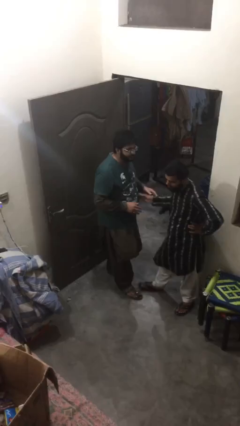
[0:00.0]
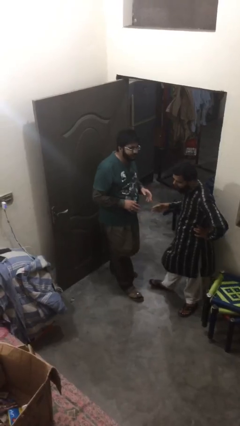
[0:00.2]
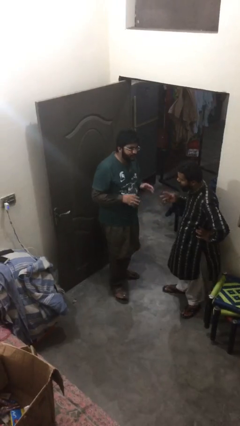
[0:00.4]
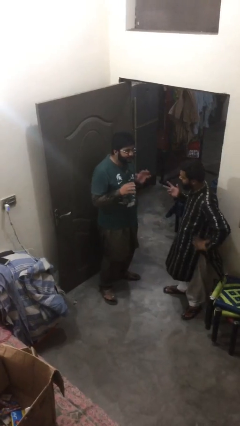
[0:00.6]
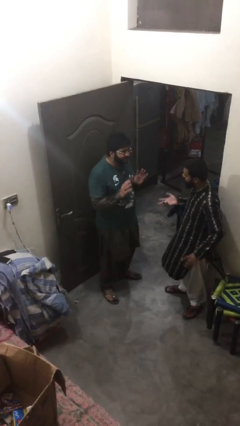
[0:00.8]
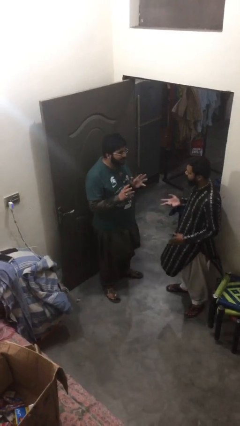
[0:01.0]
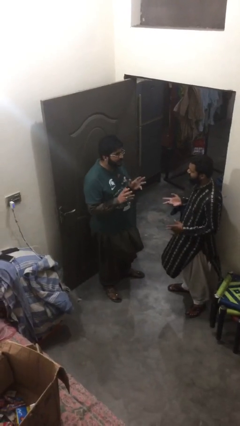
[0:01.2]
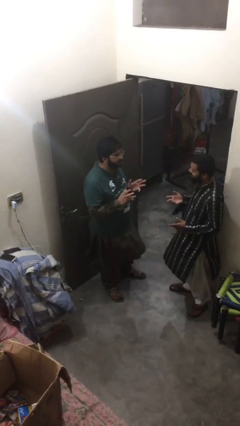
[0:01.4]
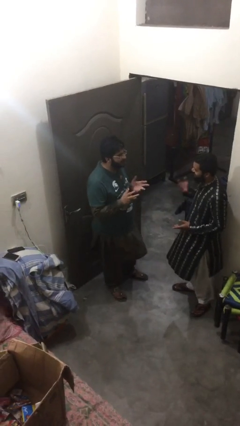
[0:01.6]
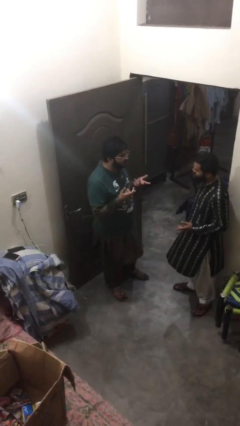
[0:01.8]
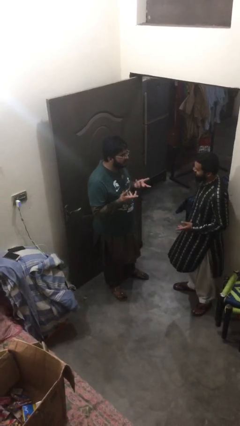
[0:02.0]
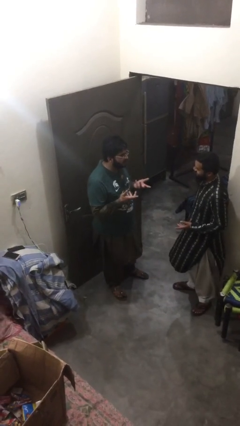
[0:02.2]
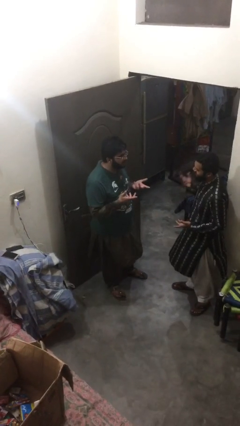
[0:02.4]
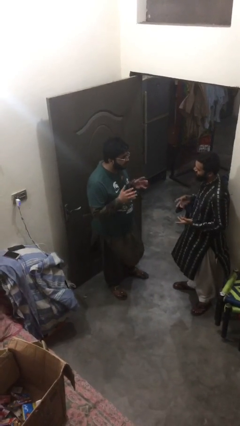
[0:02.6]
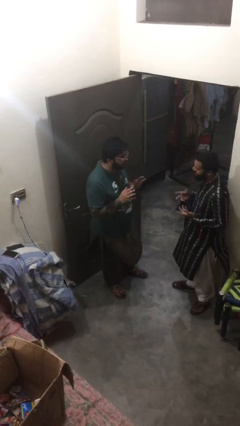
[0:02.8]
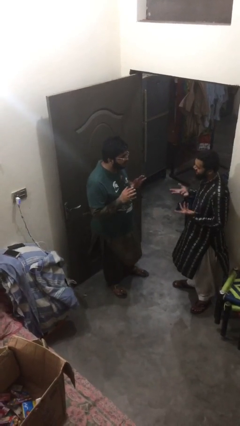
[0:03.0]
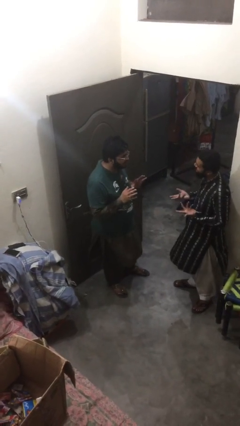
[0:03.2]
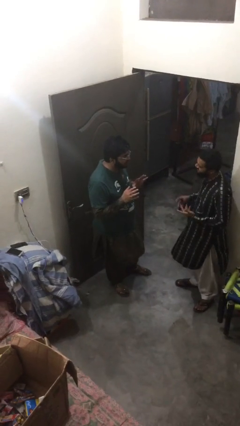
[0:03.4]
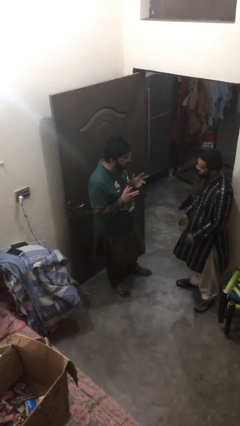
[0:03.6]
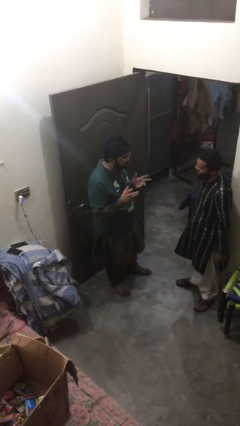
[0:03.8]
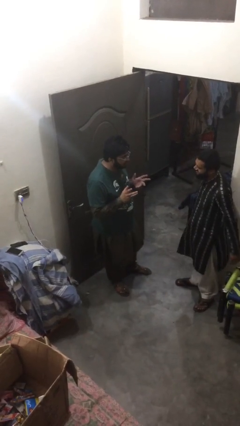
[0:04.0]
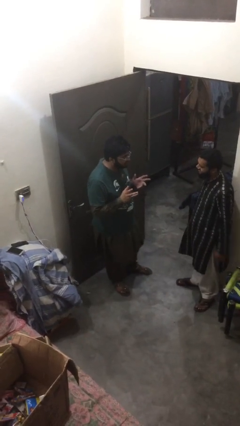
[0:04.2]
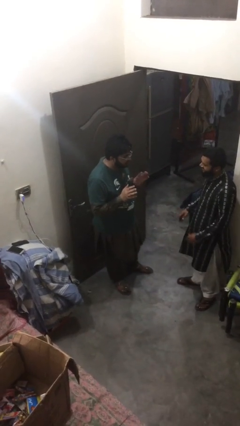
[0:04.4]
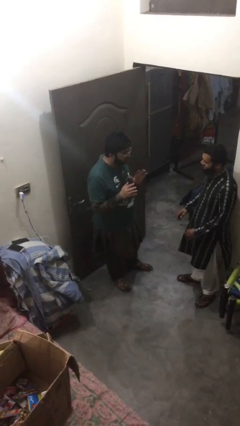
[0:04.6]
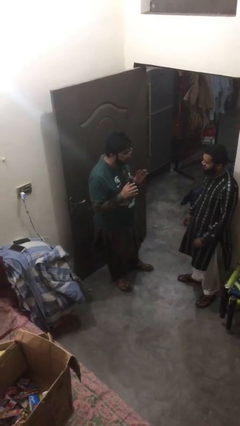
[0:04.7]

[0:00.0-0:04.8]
person talks to person

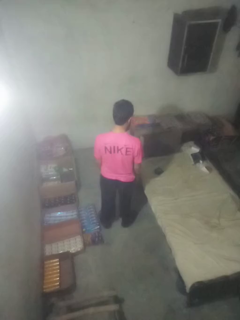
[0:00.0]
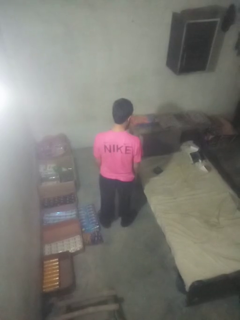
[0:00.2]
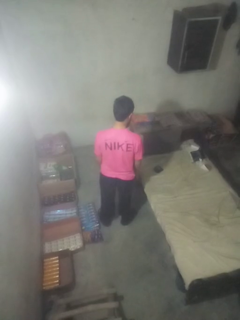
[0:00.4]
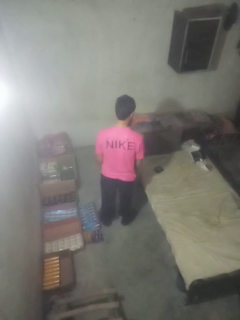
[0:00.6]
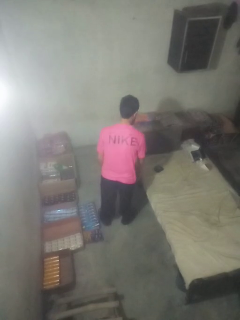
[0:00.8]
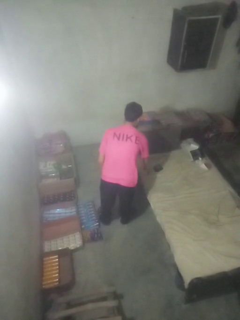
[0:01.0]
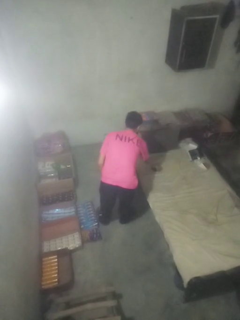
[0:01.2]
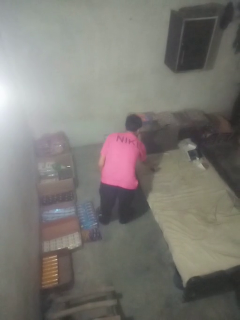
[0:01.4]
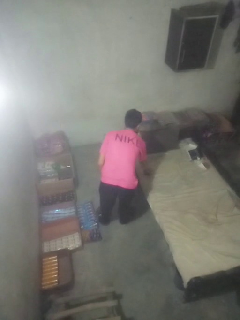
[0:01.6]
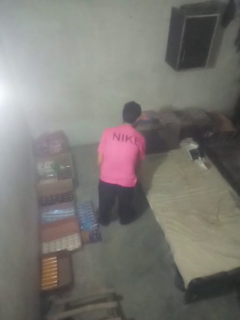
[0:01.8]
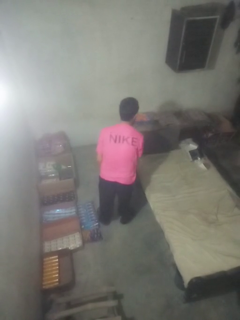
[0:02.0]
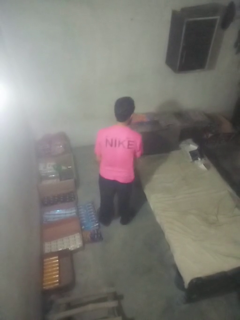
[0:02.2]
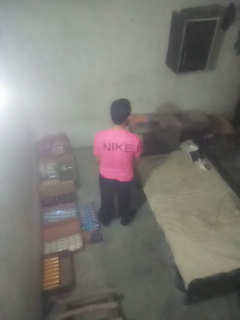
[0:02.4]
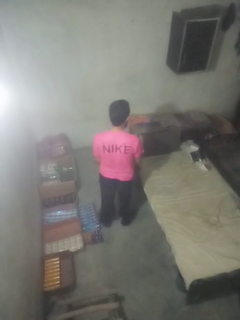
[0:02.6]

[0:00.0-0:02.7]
person picks up object from bed

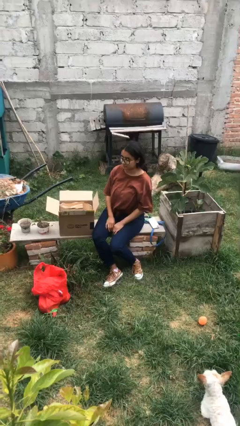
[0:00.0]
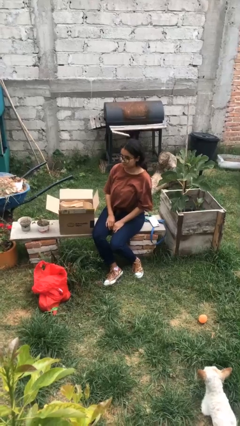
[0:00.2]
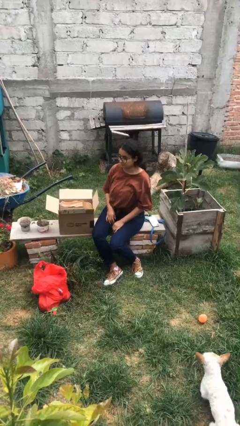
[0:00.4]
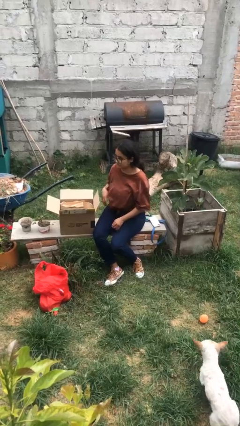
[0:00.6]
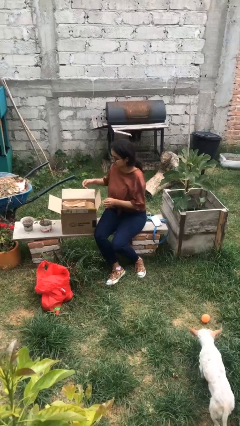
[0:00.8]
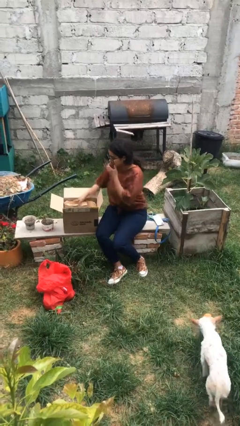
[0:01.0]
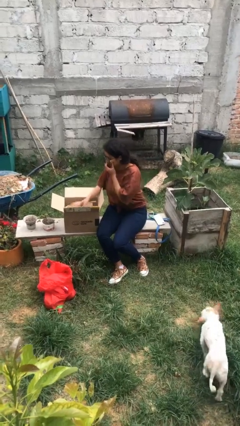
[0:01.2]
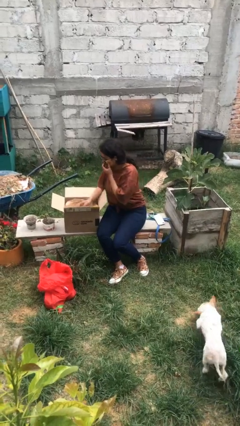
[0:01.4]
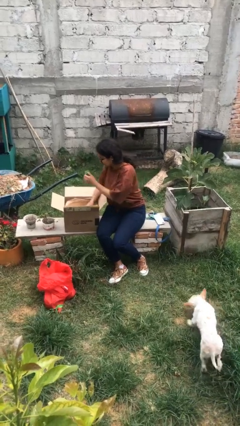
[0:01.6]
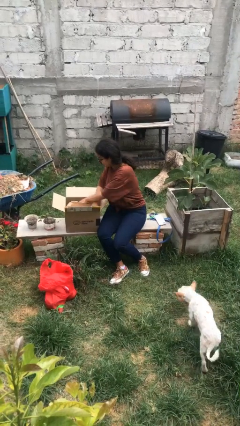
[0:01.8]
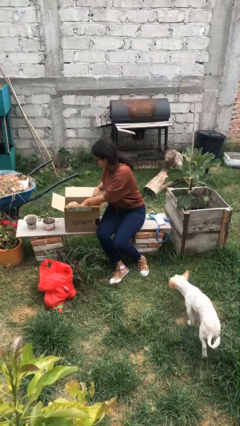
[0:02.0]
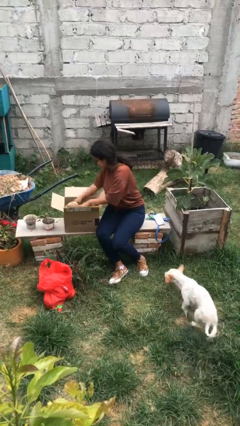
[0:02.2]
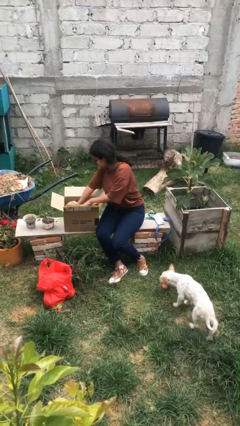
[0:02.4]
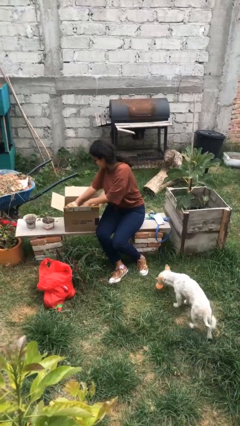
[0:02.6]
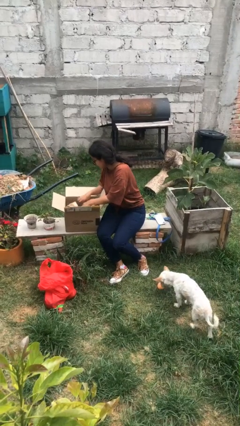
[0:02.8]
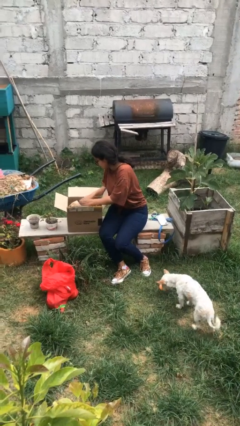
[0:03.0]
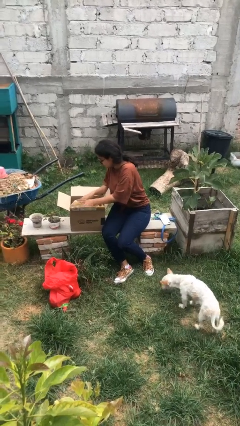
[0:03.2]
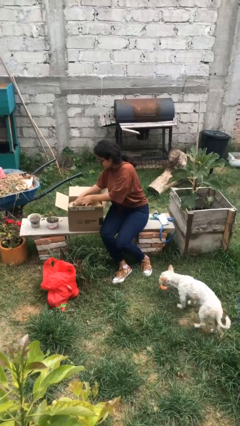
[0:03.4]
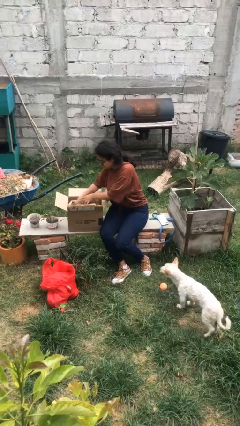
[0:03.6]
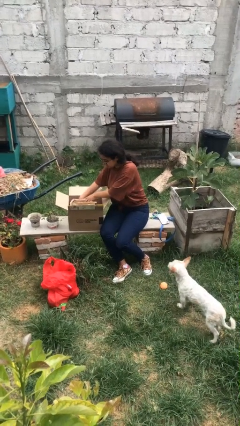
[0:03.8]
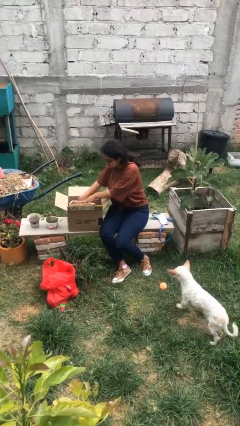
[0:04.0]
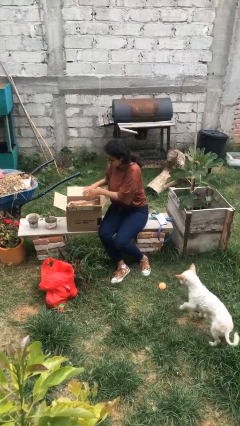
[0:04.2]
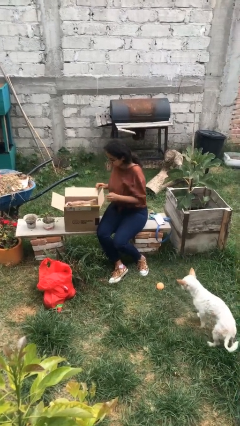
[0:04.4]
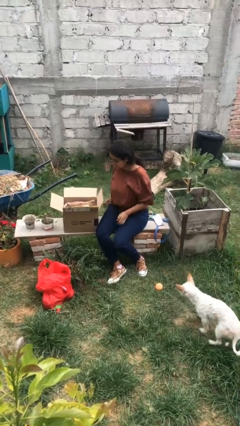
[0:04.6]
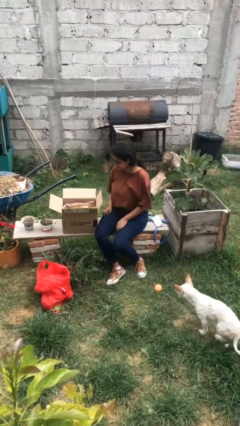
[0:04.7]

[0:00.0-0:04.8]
person searches in box

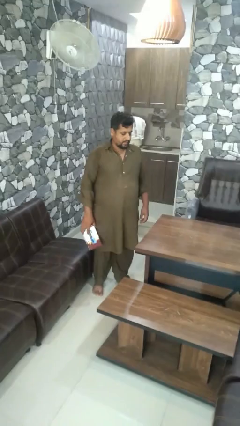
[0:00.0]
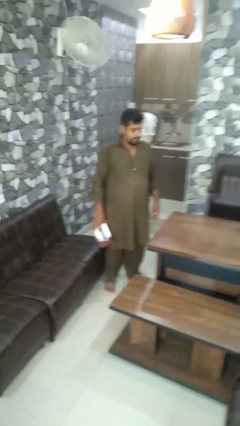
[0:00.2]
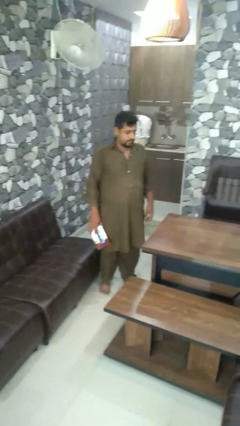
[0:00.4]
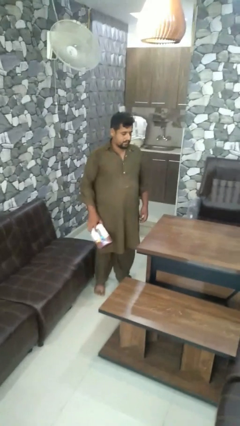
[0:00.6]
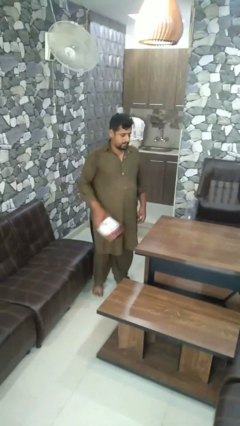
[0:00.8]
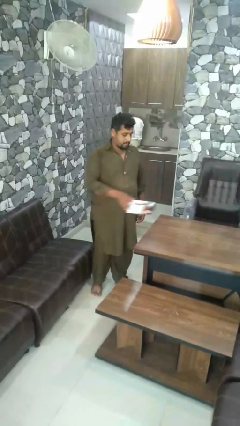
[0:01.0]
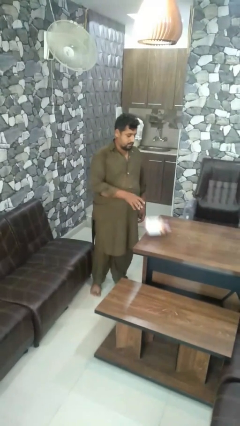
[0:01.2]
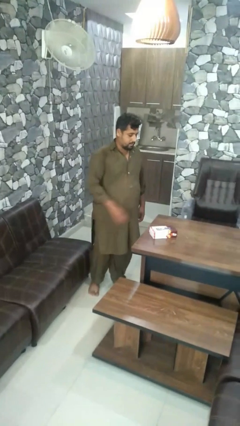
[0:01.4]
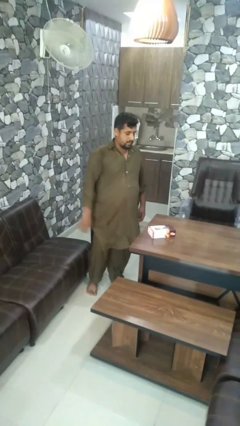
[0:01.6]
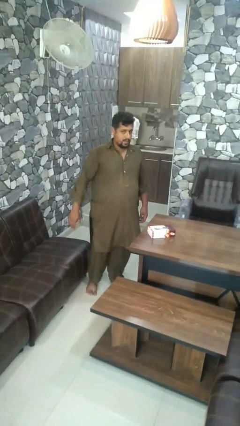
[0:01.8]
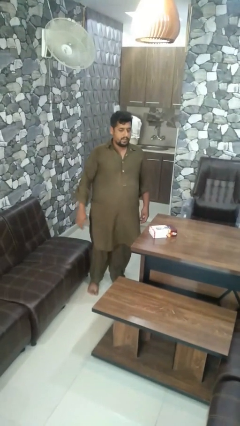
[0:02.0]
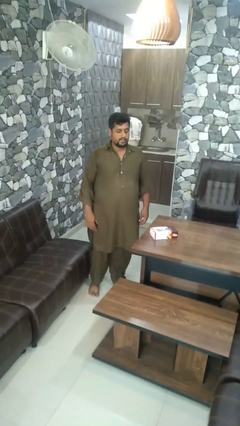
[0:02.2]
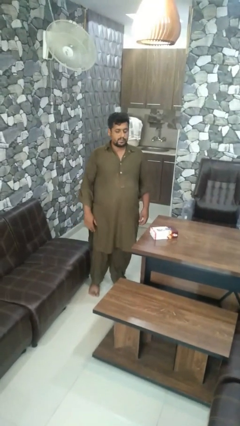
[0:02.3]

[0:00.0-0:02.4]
person throws object on table

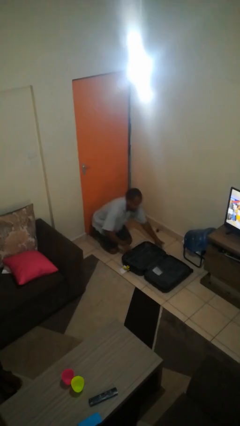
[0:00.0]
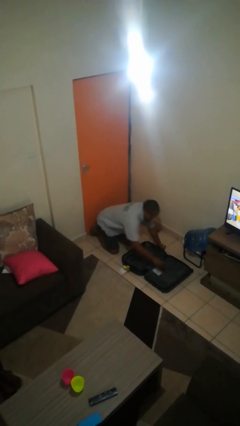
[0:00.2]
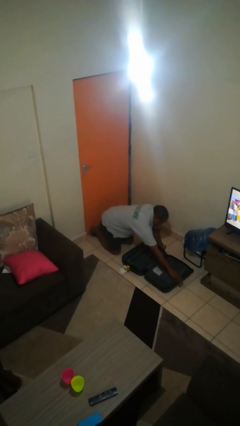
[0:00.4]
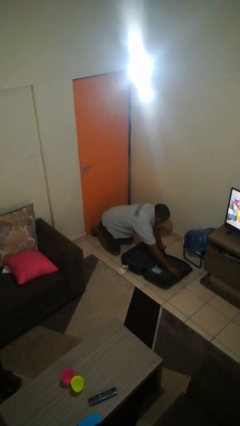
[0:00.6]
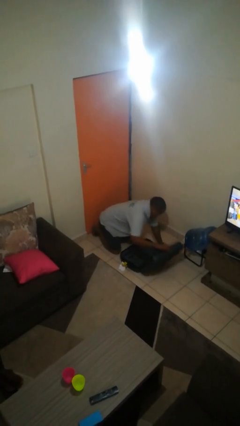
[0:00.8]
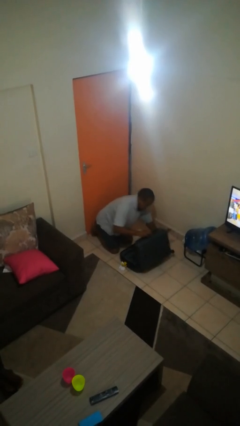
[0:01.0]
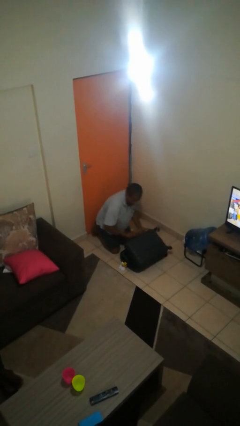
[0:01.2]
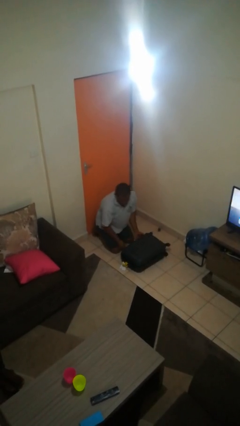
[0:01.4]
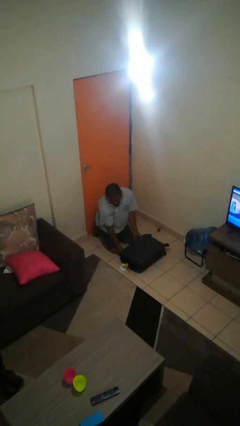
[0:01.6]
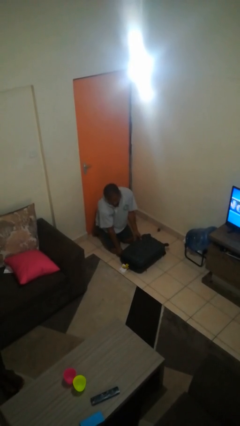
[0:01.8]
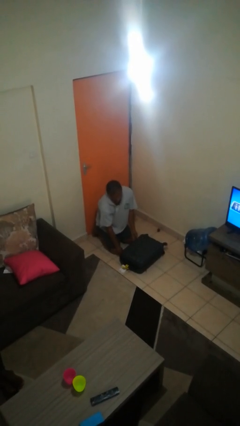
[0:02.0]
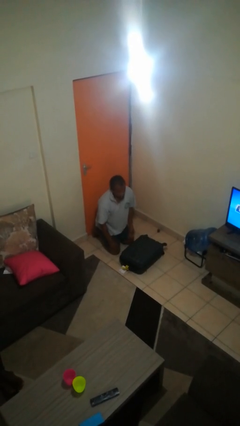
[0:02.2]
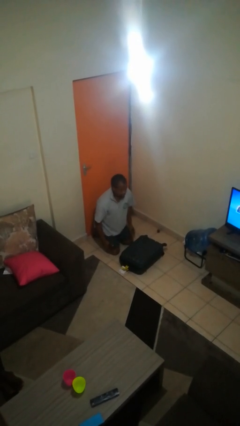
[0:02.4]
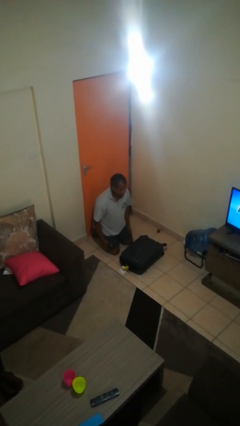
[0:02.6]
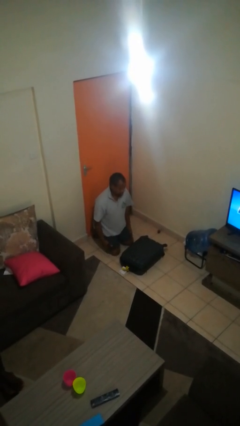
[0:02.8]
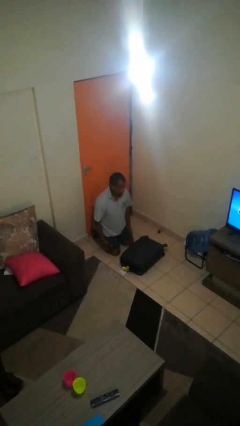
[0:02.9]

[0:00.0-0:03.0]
person closes suitcase

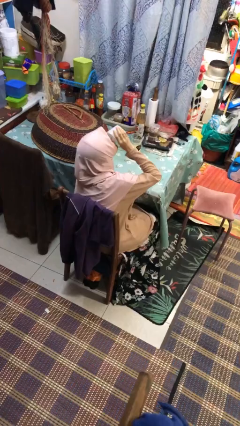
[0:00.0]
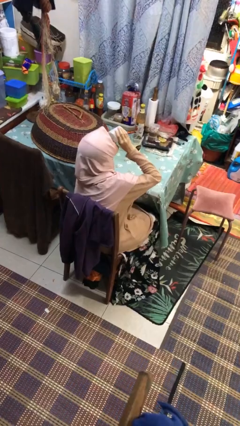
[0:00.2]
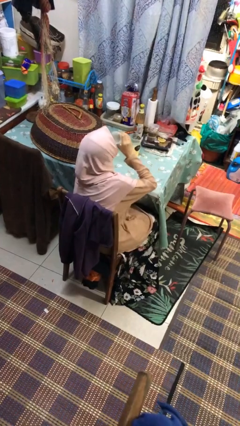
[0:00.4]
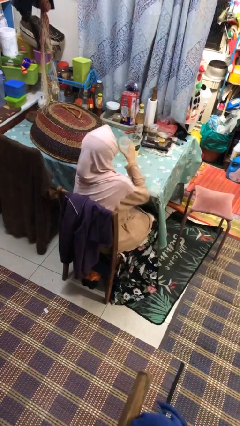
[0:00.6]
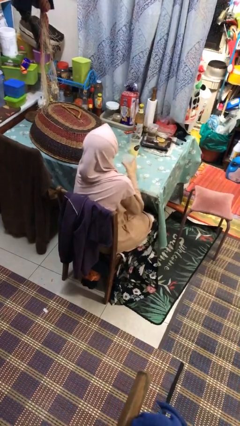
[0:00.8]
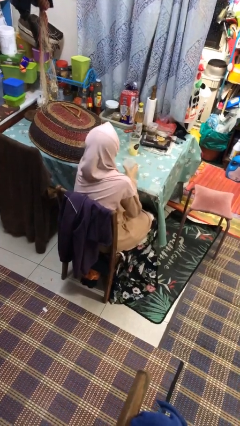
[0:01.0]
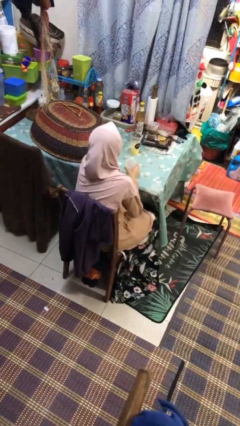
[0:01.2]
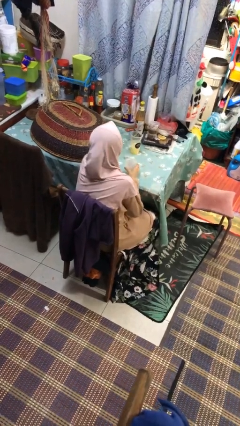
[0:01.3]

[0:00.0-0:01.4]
person puts down object on table
